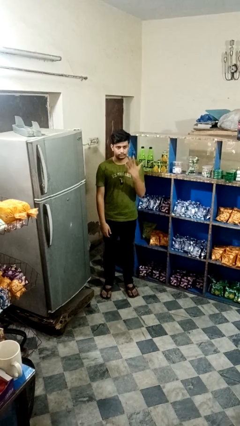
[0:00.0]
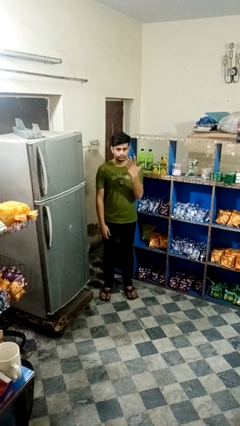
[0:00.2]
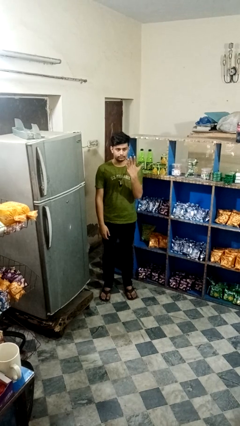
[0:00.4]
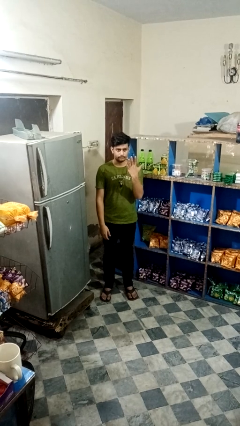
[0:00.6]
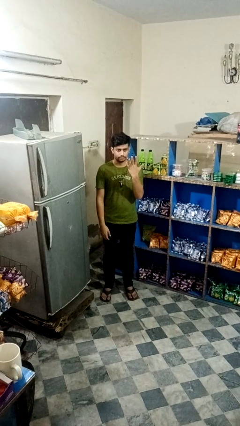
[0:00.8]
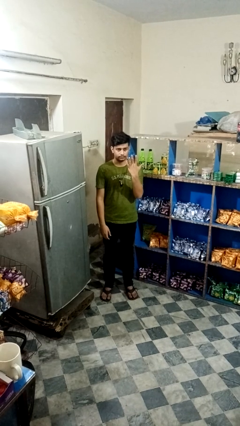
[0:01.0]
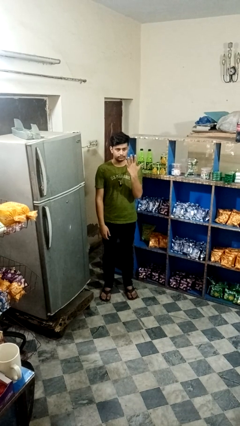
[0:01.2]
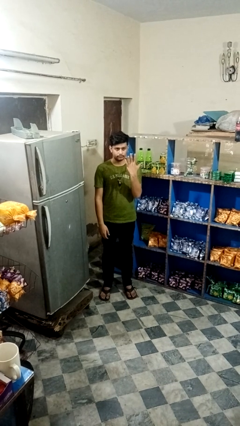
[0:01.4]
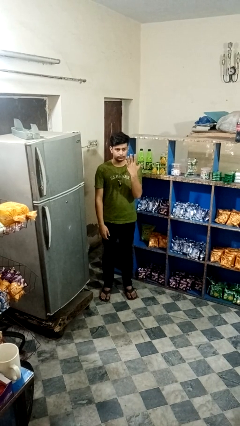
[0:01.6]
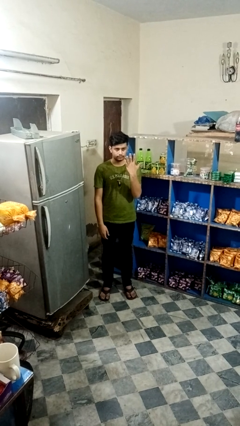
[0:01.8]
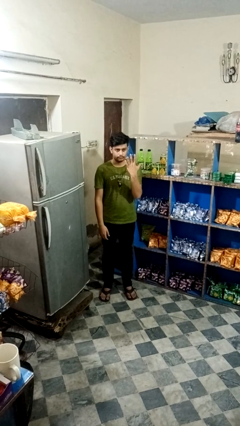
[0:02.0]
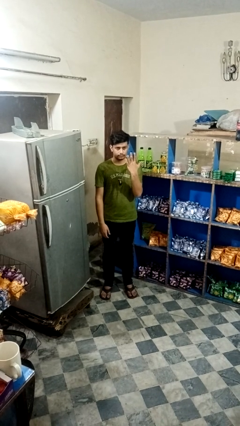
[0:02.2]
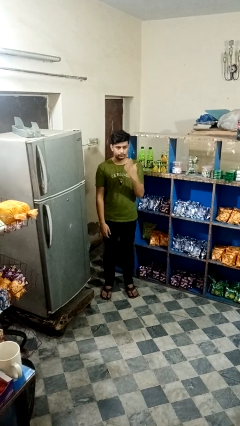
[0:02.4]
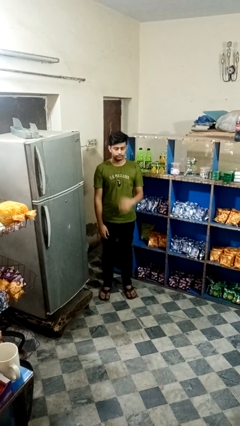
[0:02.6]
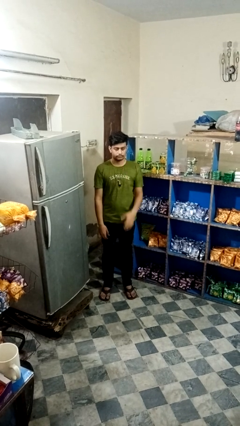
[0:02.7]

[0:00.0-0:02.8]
person gestures number five

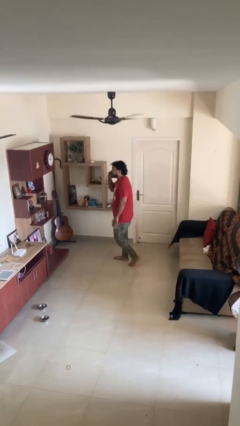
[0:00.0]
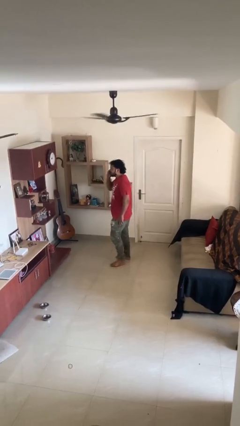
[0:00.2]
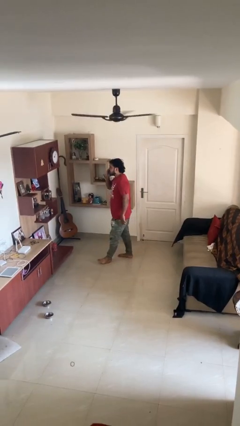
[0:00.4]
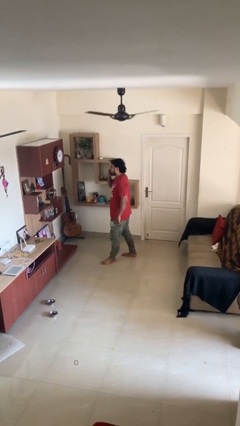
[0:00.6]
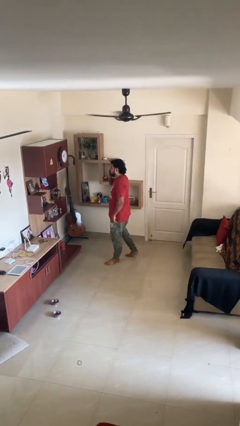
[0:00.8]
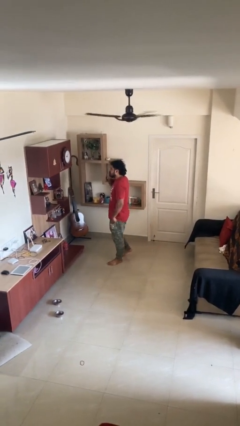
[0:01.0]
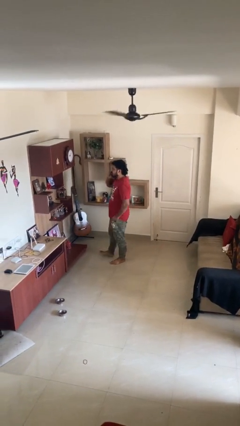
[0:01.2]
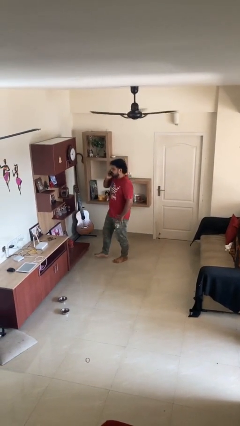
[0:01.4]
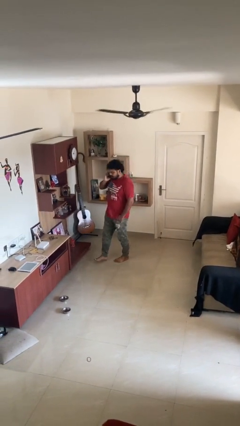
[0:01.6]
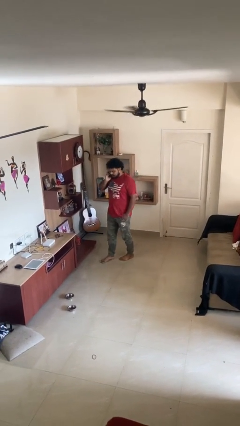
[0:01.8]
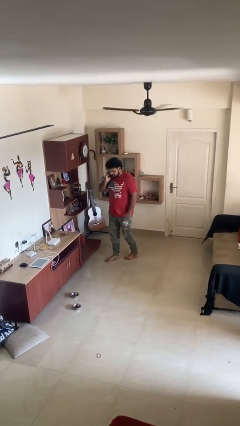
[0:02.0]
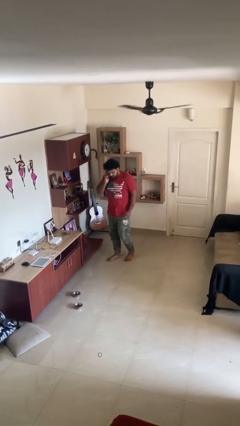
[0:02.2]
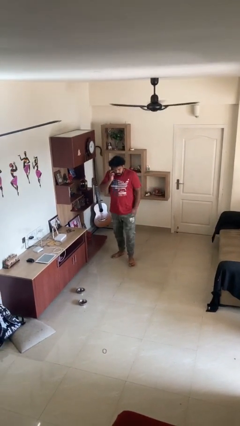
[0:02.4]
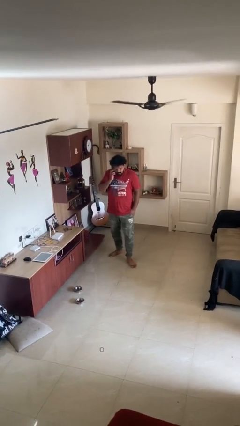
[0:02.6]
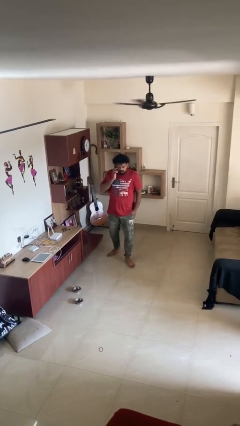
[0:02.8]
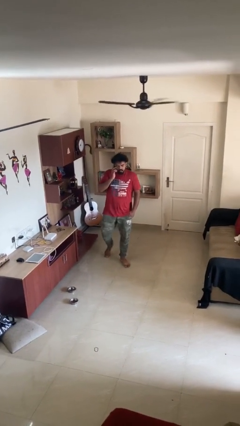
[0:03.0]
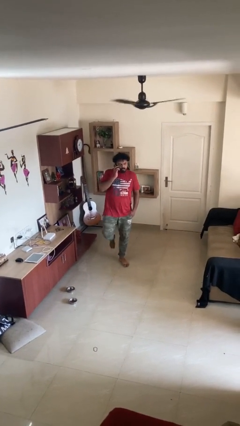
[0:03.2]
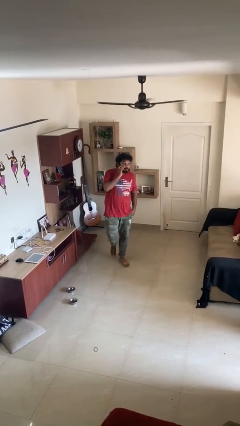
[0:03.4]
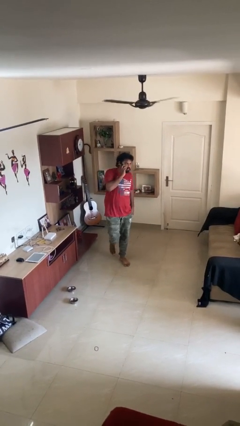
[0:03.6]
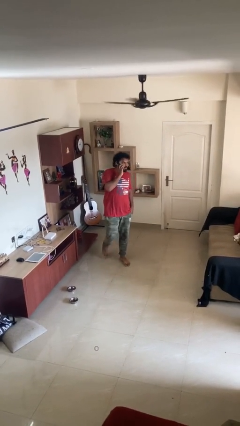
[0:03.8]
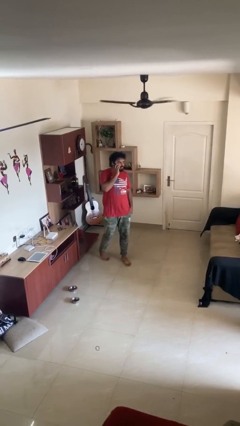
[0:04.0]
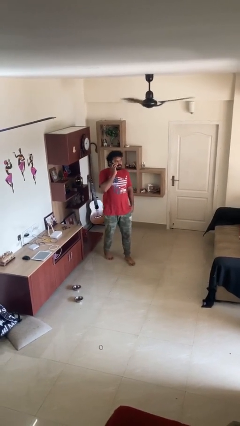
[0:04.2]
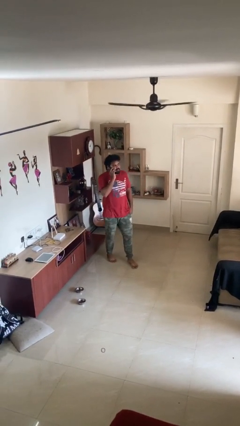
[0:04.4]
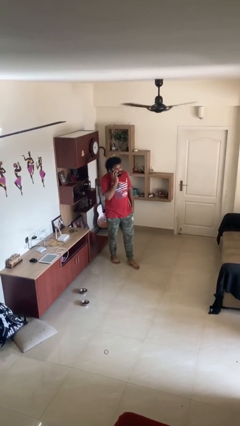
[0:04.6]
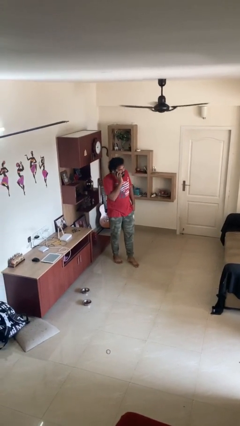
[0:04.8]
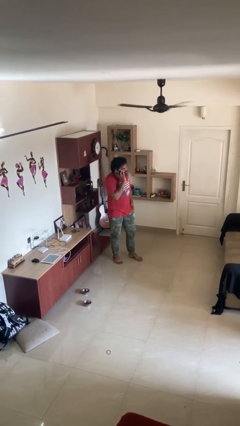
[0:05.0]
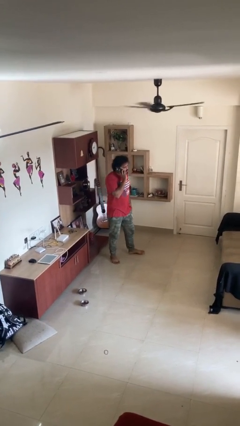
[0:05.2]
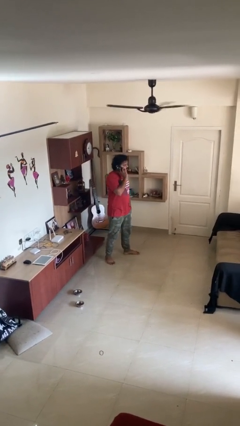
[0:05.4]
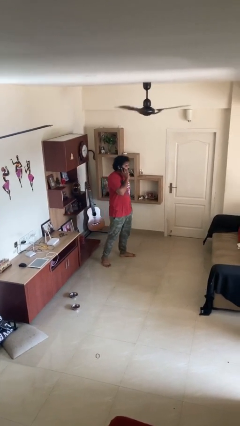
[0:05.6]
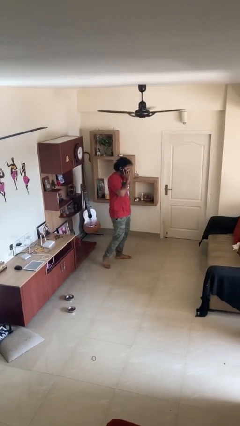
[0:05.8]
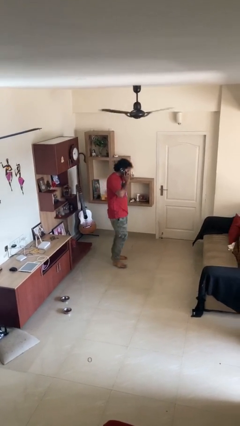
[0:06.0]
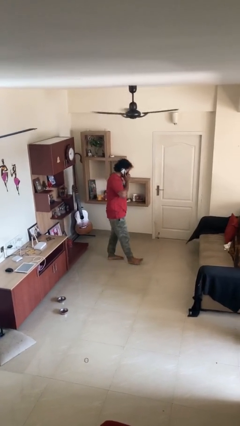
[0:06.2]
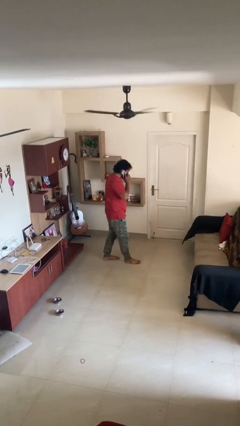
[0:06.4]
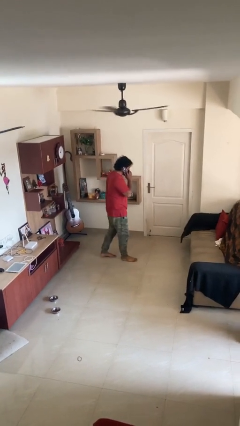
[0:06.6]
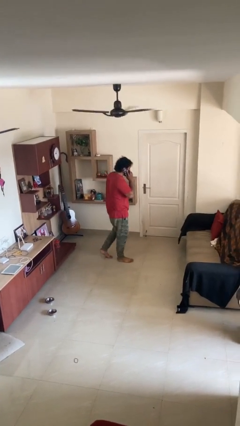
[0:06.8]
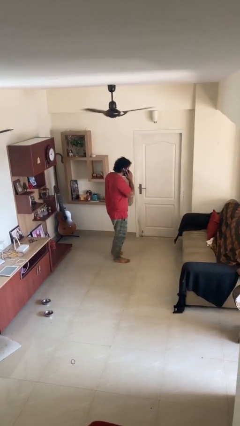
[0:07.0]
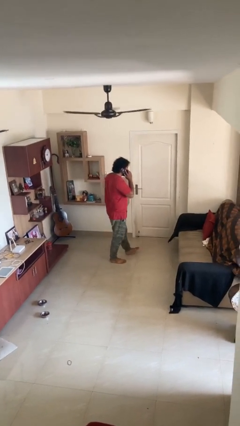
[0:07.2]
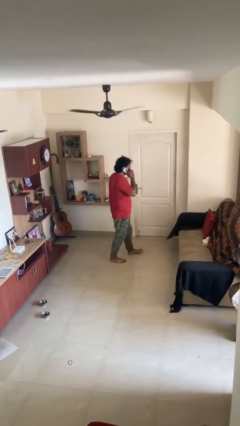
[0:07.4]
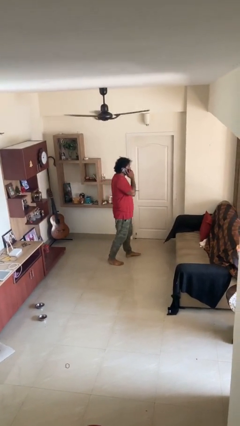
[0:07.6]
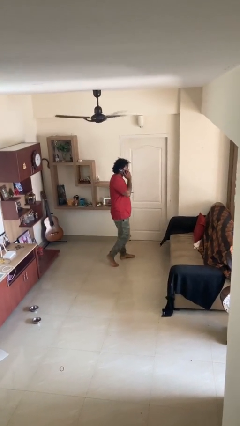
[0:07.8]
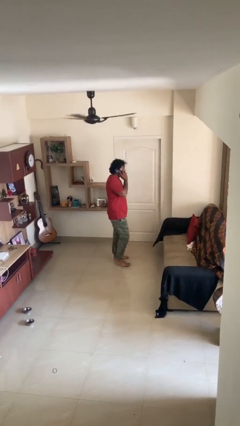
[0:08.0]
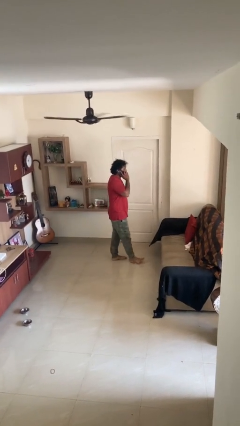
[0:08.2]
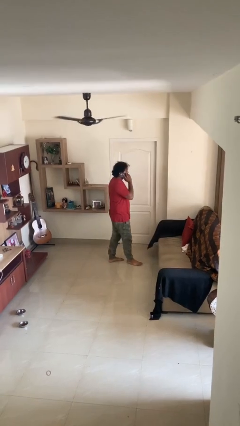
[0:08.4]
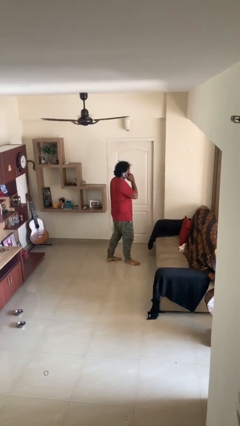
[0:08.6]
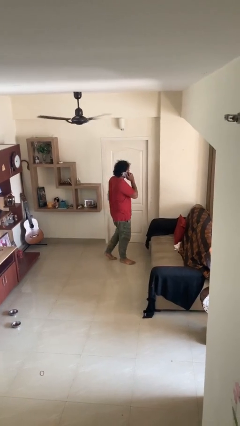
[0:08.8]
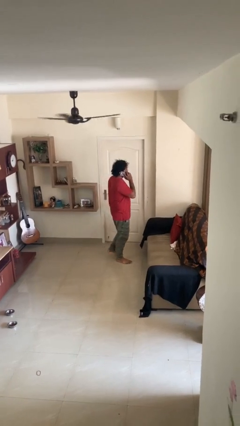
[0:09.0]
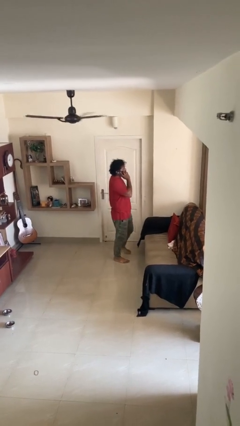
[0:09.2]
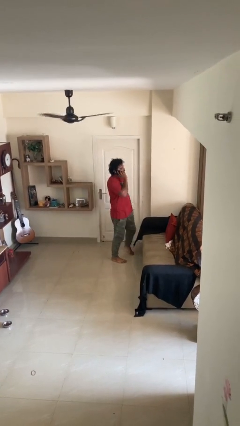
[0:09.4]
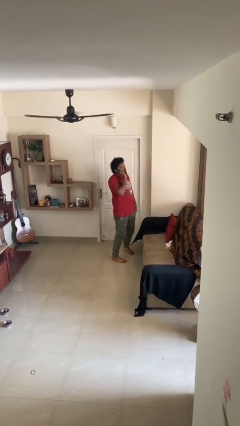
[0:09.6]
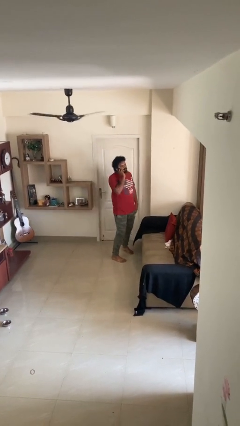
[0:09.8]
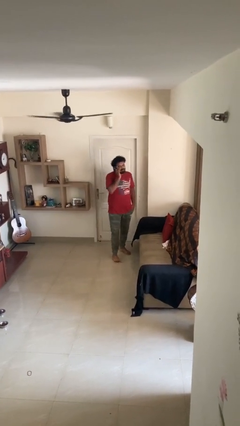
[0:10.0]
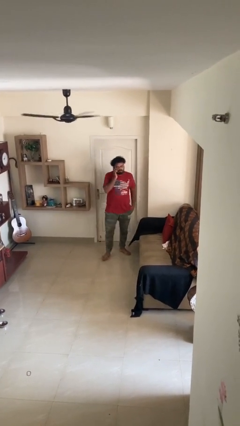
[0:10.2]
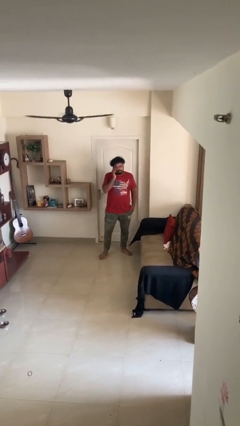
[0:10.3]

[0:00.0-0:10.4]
person talks on phone

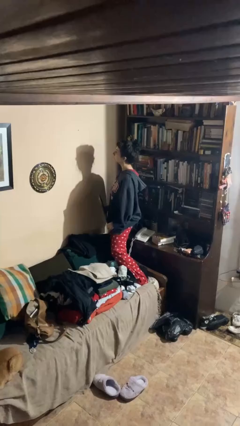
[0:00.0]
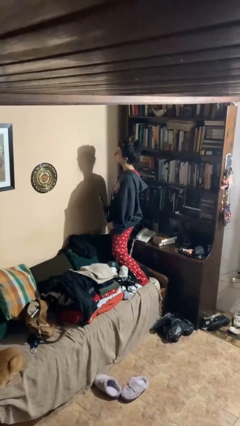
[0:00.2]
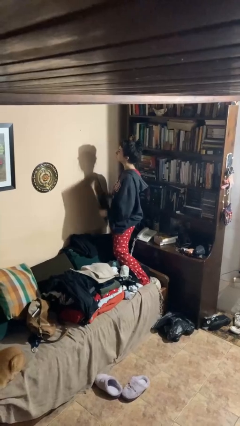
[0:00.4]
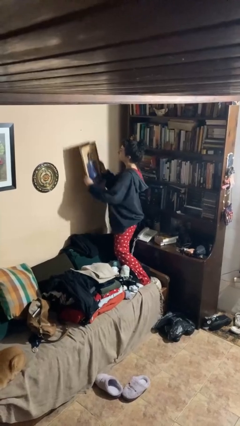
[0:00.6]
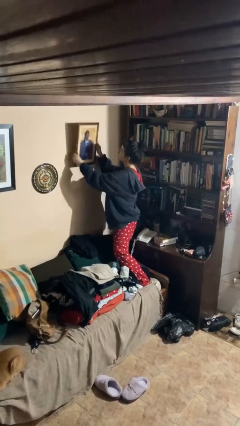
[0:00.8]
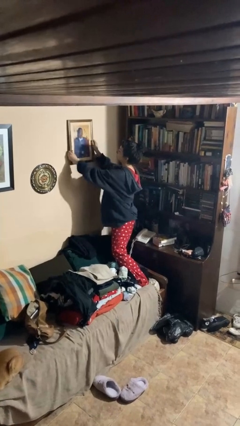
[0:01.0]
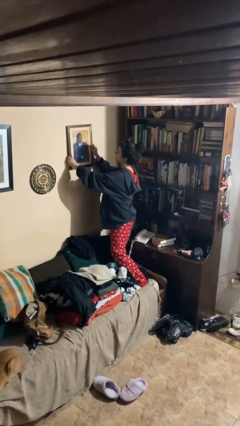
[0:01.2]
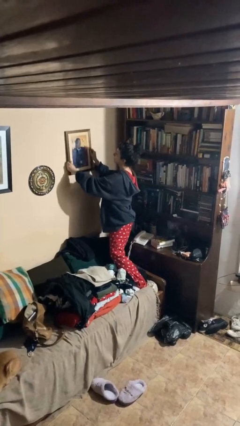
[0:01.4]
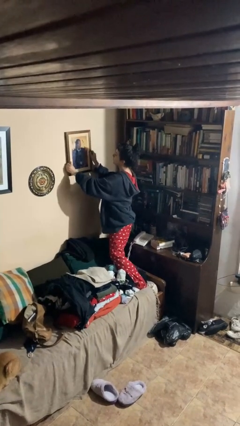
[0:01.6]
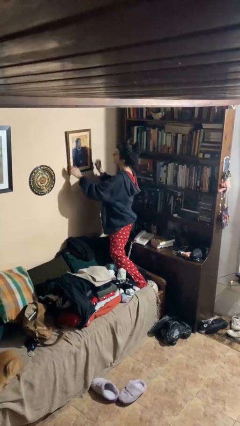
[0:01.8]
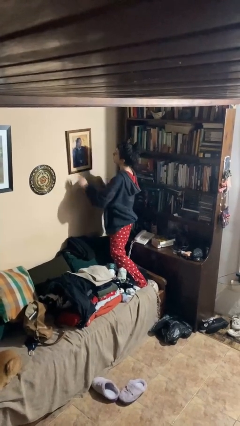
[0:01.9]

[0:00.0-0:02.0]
person puts up picture frame

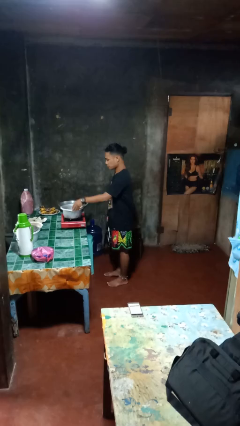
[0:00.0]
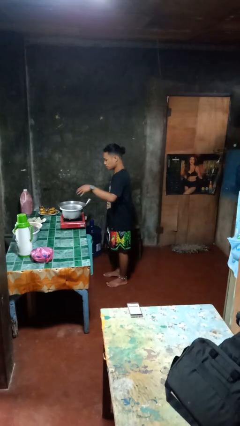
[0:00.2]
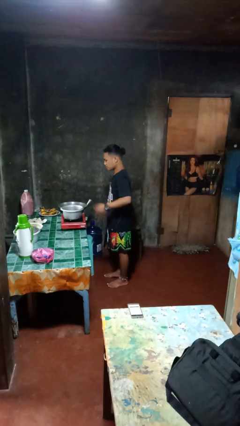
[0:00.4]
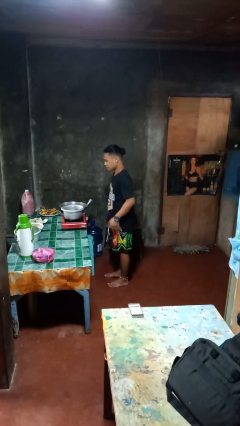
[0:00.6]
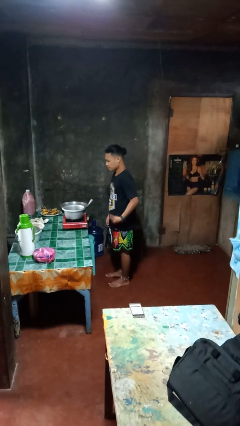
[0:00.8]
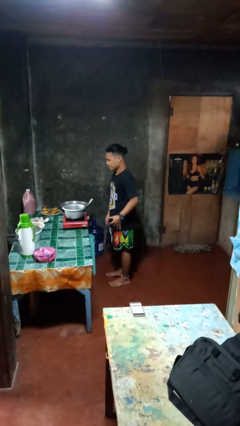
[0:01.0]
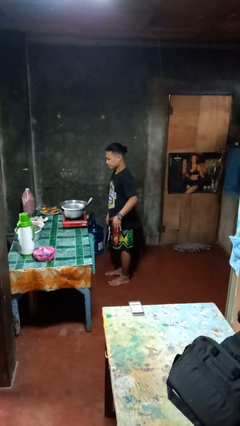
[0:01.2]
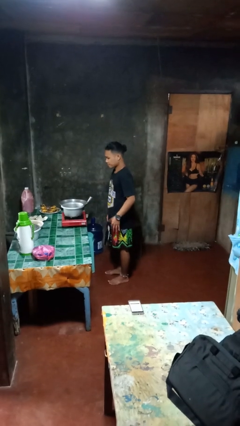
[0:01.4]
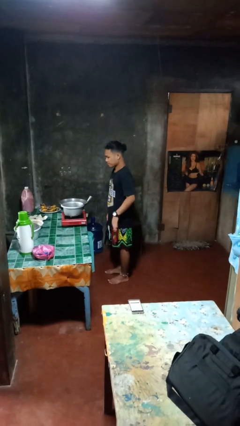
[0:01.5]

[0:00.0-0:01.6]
person burns hand

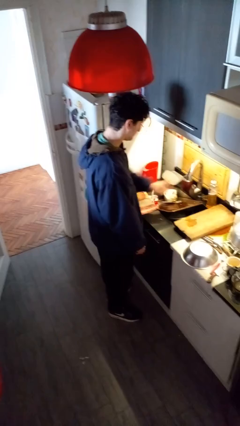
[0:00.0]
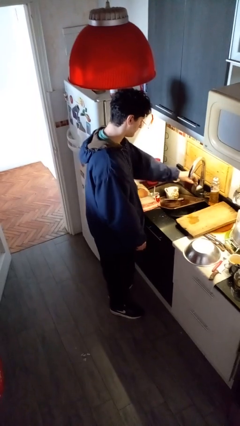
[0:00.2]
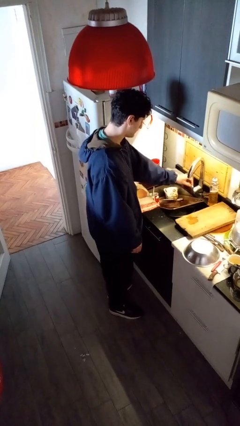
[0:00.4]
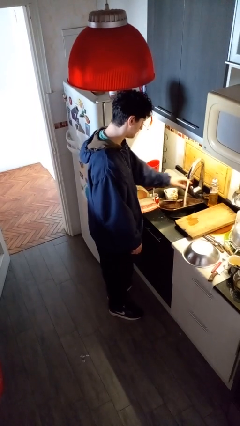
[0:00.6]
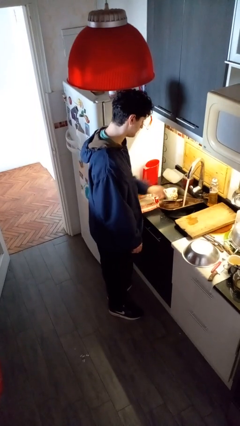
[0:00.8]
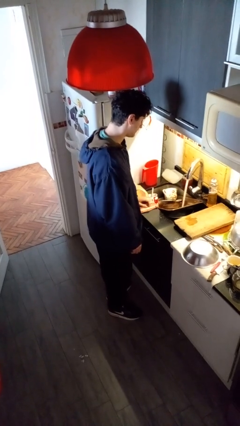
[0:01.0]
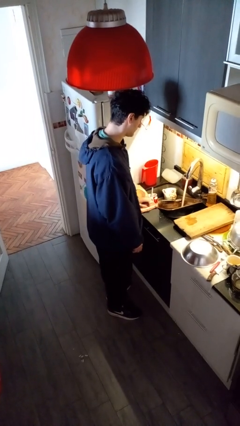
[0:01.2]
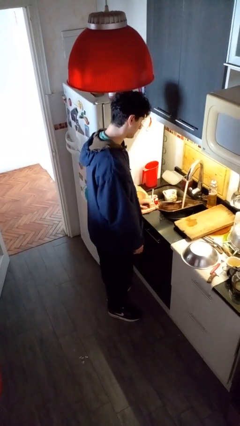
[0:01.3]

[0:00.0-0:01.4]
person turns on faucet
